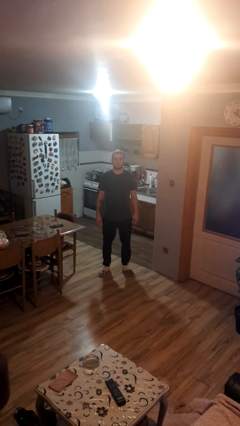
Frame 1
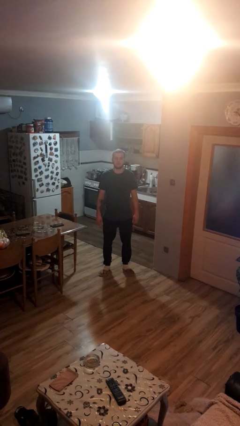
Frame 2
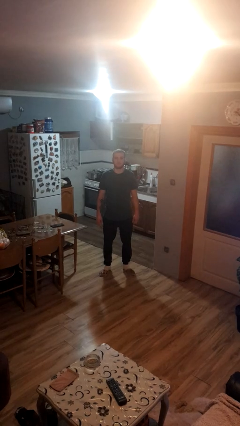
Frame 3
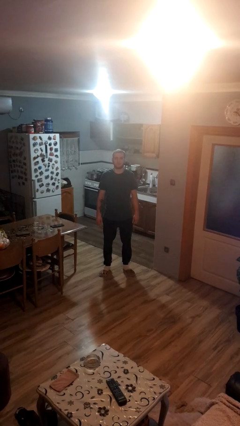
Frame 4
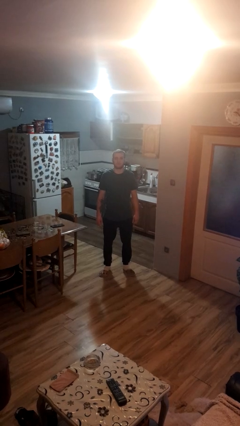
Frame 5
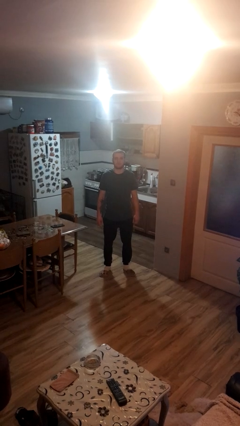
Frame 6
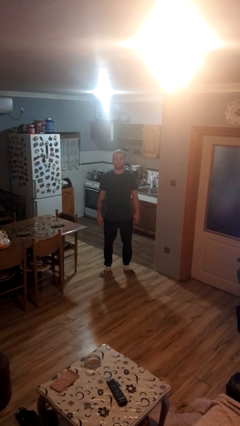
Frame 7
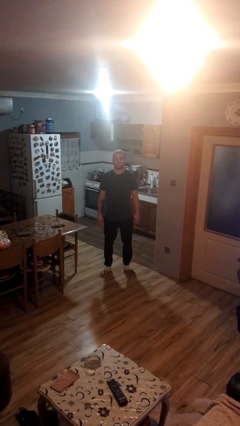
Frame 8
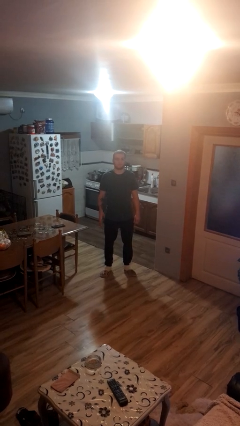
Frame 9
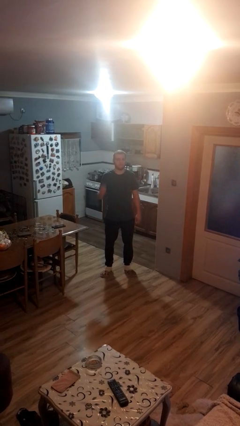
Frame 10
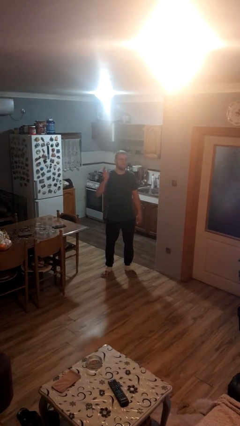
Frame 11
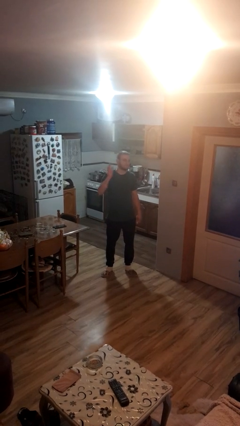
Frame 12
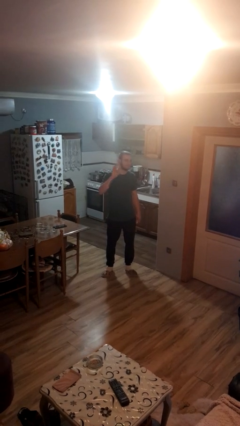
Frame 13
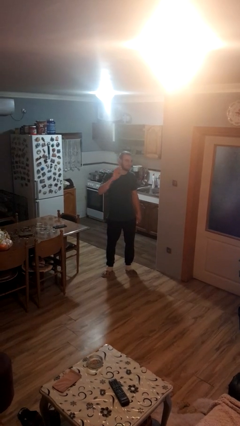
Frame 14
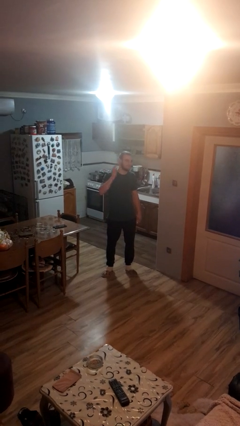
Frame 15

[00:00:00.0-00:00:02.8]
person waves at person

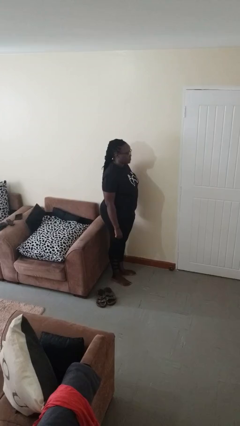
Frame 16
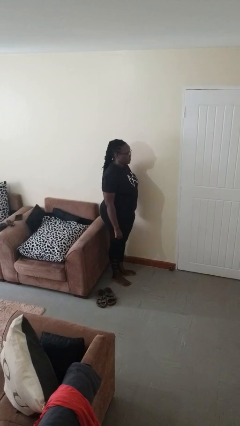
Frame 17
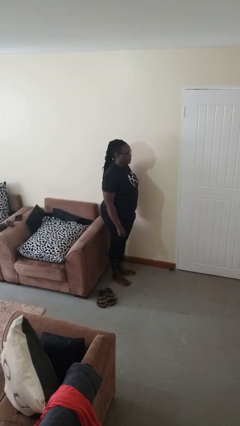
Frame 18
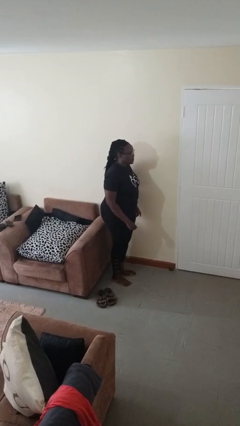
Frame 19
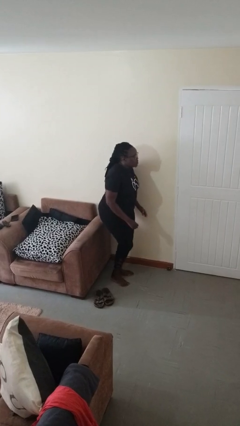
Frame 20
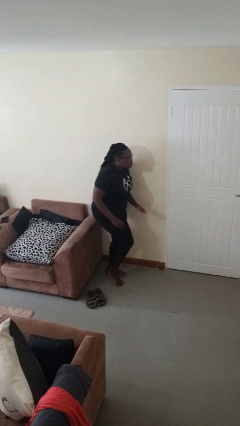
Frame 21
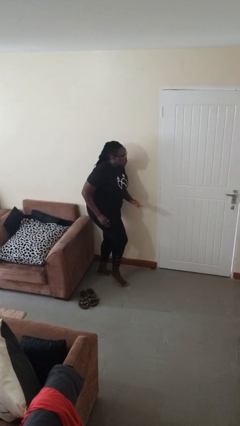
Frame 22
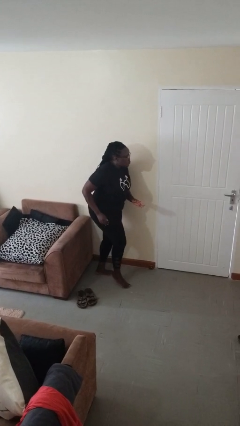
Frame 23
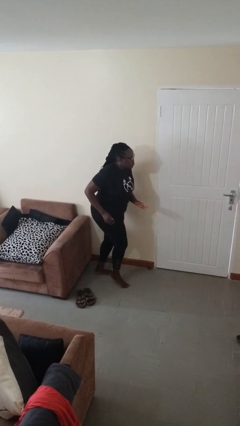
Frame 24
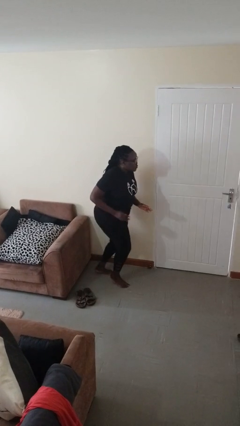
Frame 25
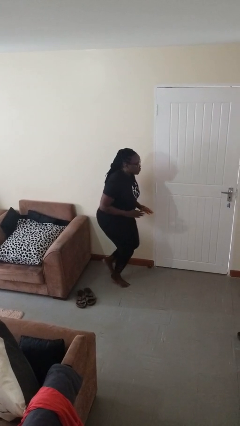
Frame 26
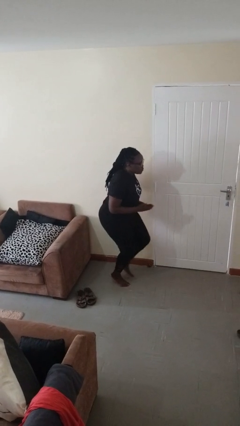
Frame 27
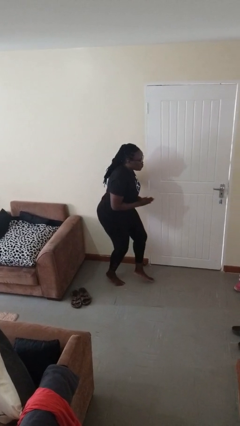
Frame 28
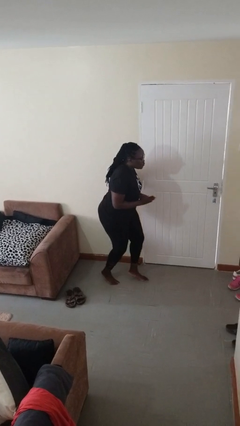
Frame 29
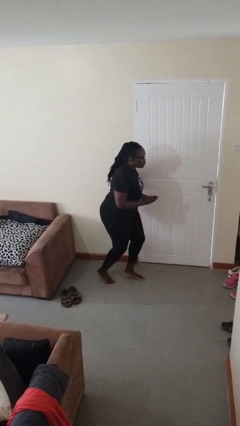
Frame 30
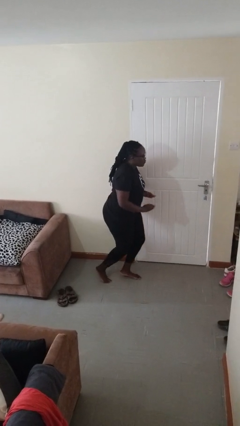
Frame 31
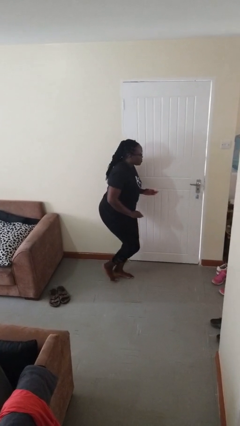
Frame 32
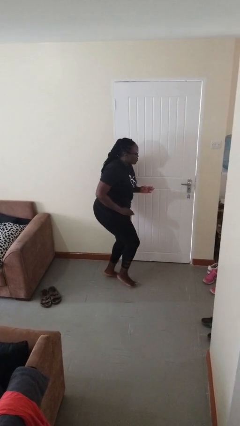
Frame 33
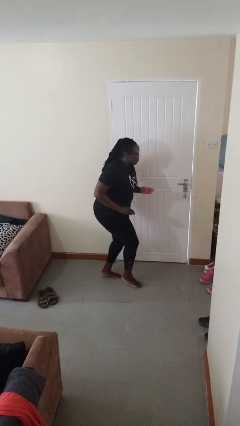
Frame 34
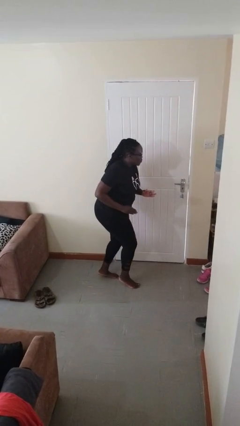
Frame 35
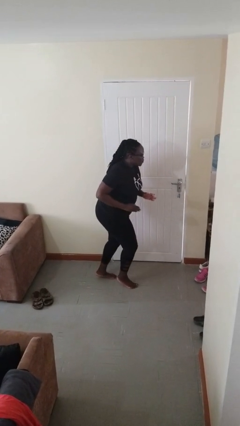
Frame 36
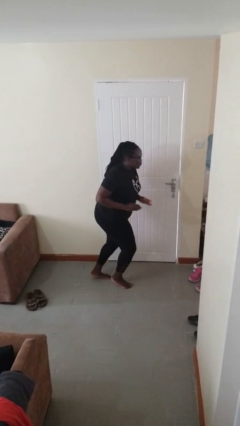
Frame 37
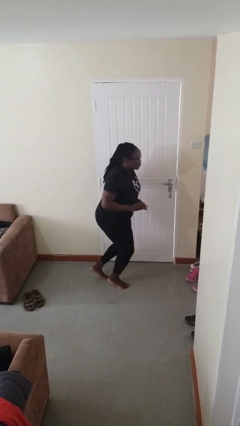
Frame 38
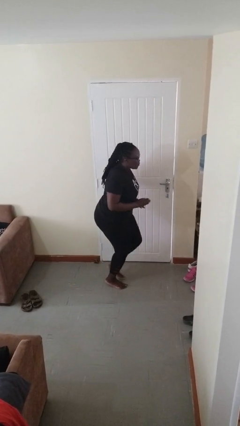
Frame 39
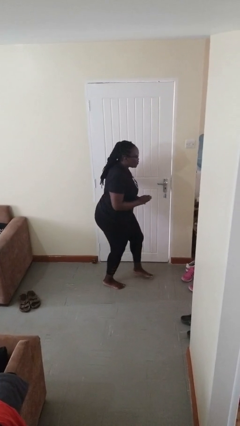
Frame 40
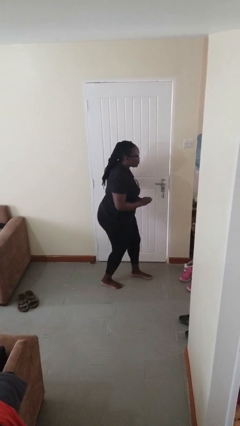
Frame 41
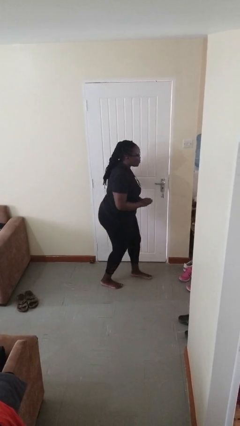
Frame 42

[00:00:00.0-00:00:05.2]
person walks tiptoe

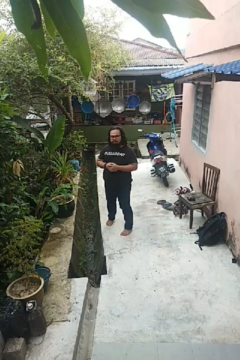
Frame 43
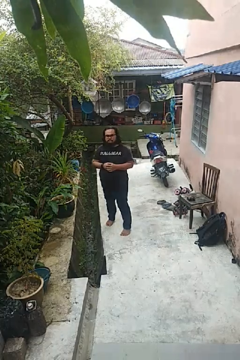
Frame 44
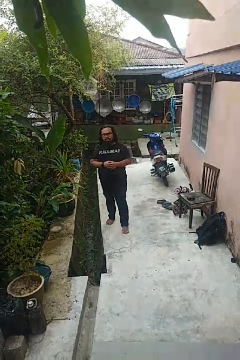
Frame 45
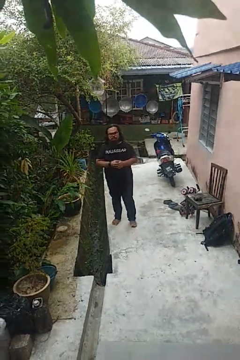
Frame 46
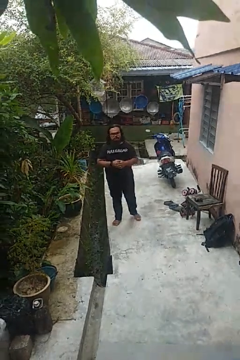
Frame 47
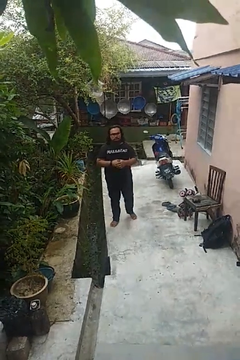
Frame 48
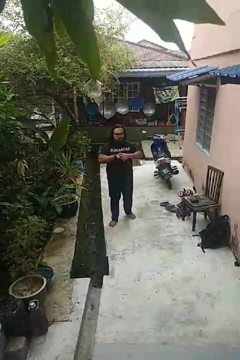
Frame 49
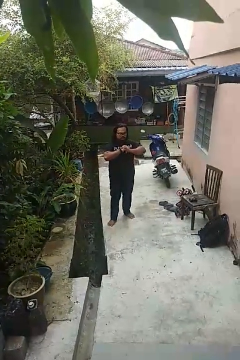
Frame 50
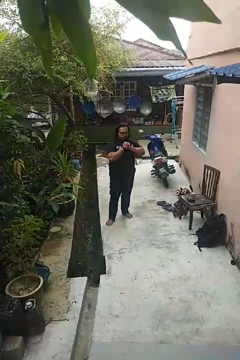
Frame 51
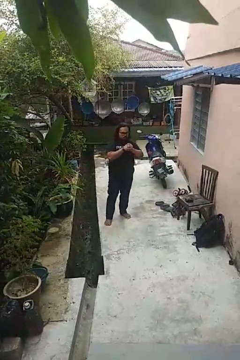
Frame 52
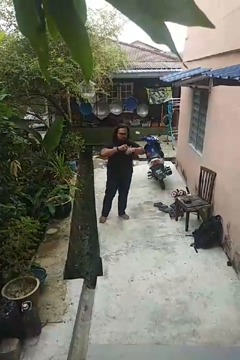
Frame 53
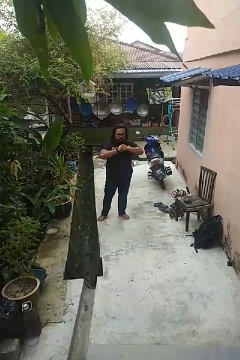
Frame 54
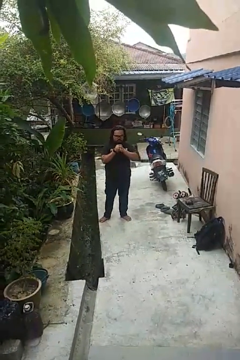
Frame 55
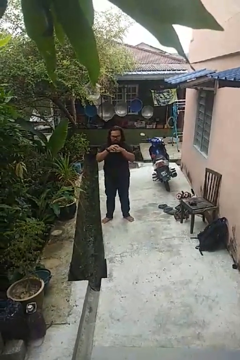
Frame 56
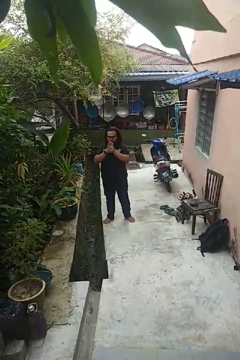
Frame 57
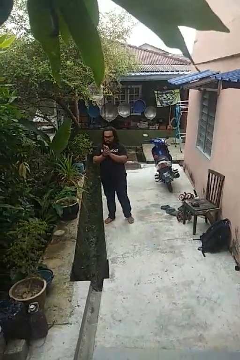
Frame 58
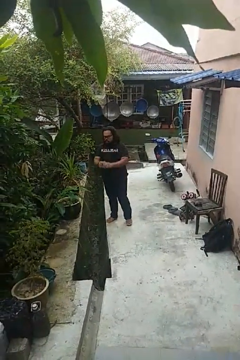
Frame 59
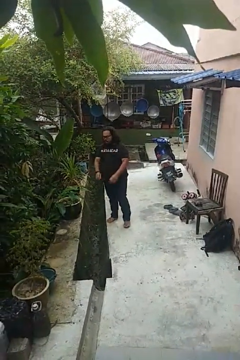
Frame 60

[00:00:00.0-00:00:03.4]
person cracks knuckles

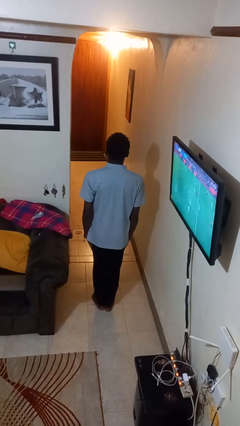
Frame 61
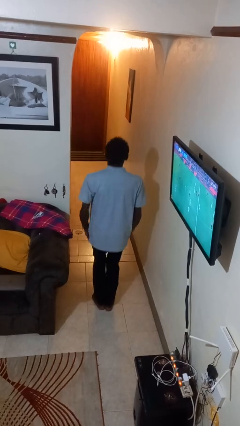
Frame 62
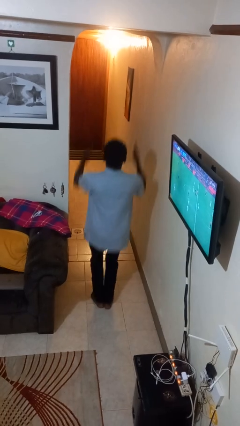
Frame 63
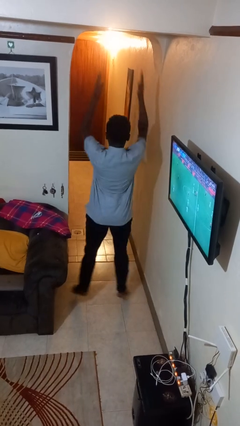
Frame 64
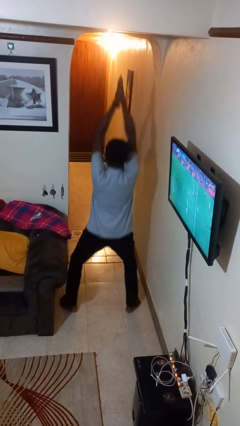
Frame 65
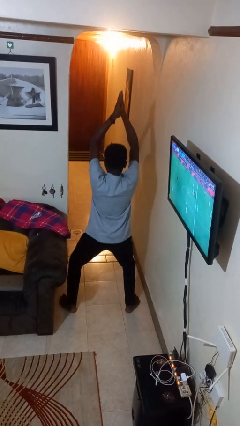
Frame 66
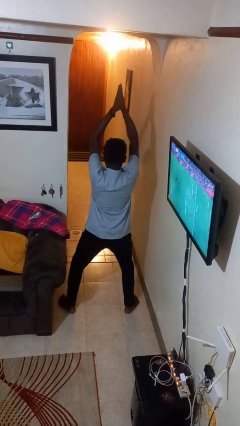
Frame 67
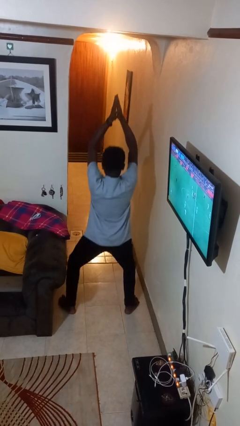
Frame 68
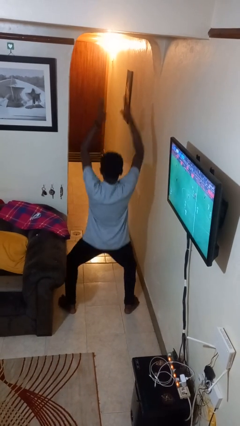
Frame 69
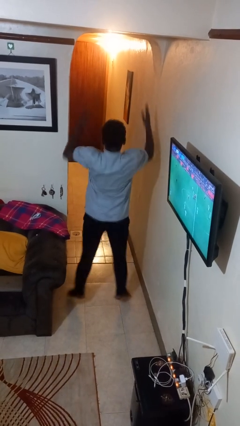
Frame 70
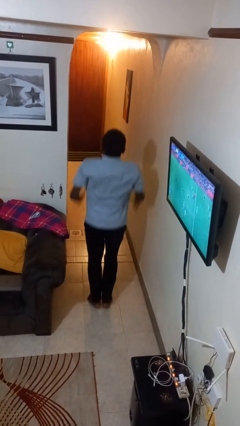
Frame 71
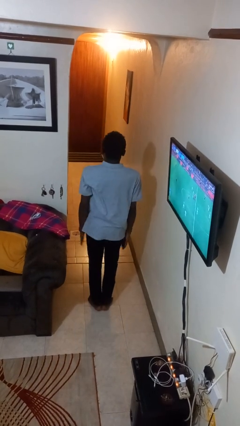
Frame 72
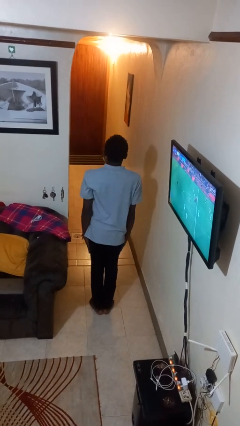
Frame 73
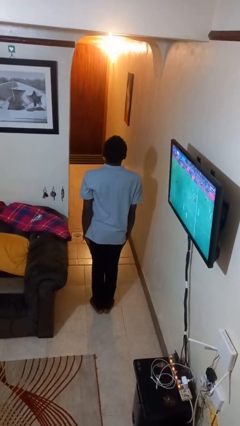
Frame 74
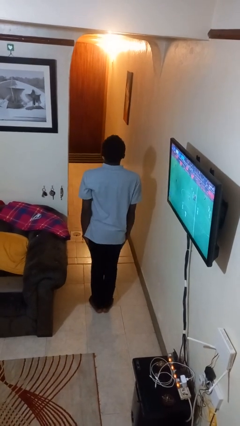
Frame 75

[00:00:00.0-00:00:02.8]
person exercises with jumping jacks

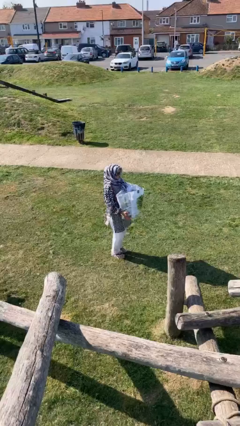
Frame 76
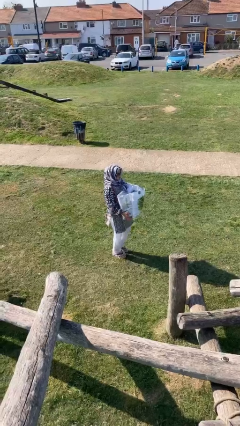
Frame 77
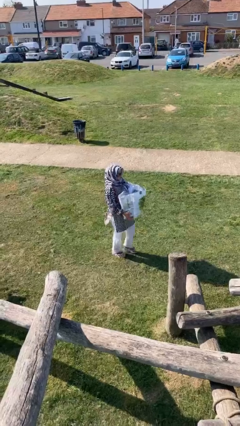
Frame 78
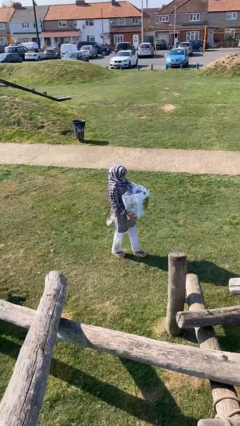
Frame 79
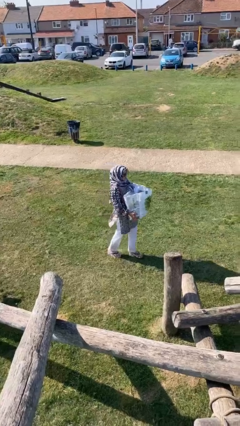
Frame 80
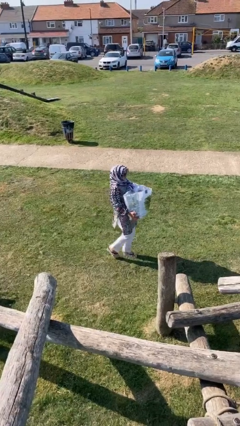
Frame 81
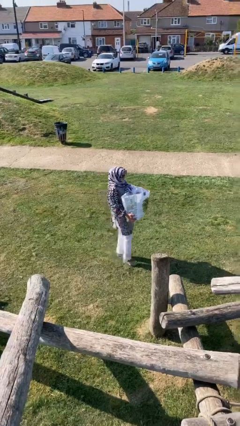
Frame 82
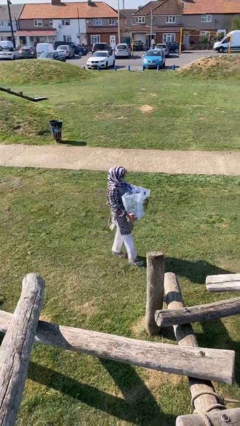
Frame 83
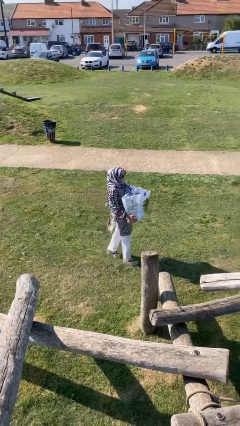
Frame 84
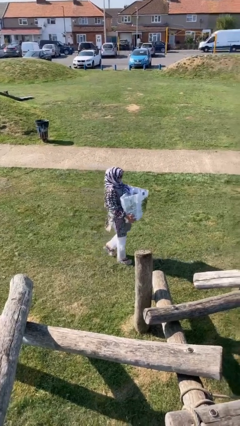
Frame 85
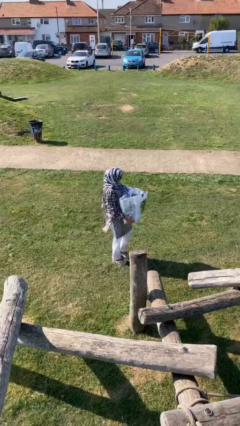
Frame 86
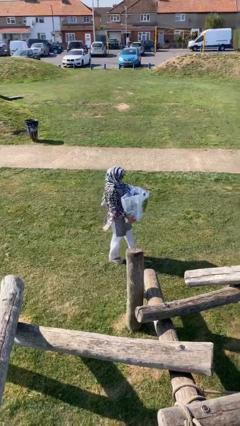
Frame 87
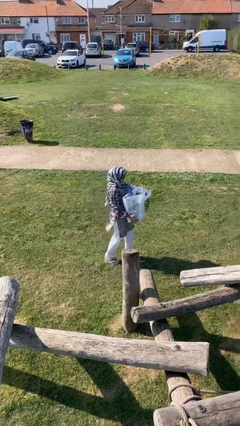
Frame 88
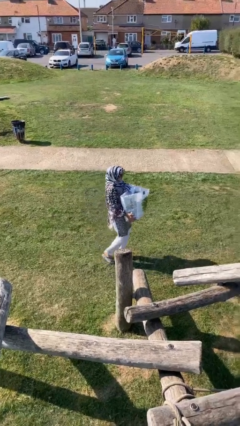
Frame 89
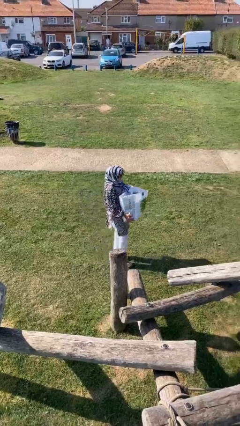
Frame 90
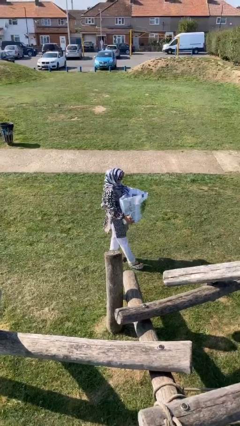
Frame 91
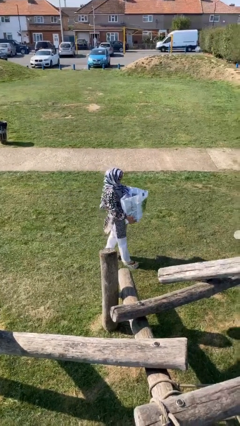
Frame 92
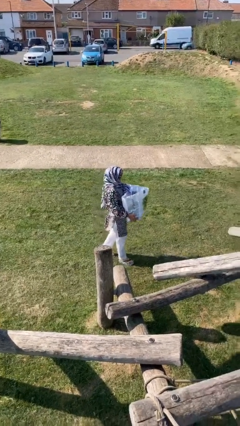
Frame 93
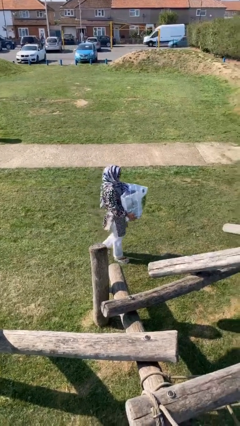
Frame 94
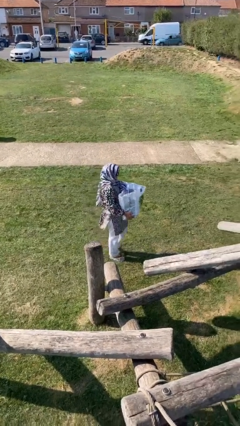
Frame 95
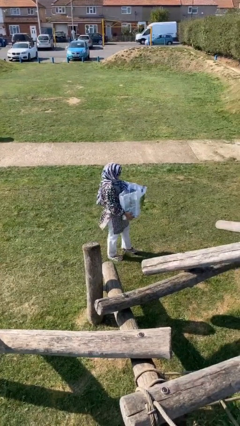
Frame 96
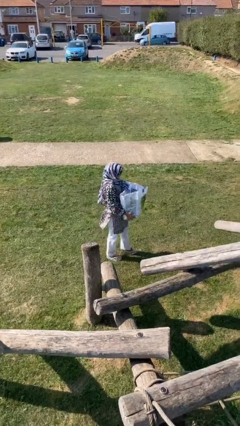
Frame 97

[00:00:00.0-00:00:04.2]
person carries heavy object
